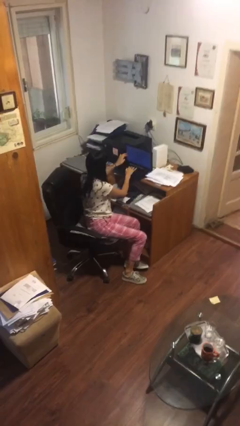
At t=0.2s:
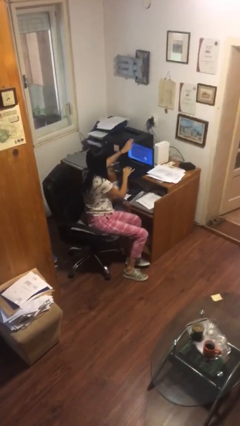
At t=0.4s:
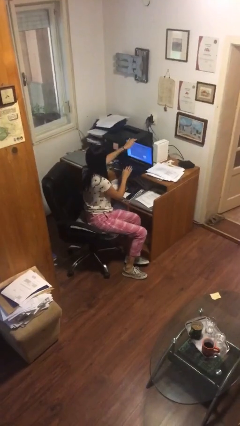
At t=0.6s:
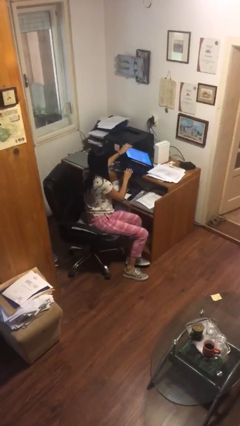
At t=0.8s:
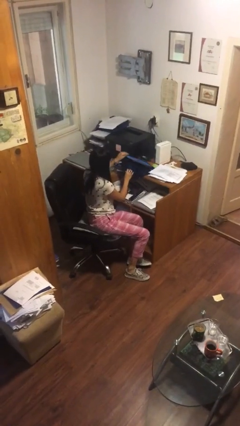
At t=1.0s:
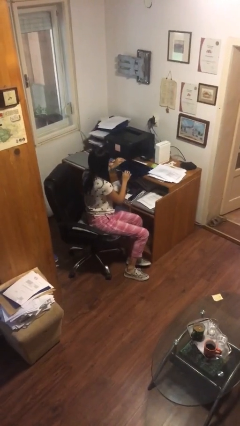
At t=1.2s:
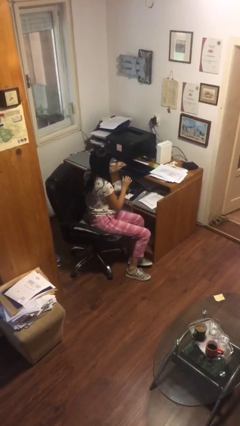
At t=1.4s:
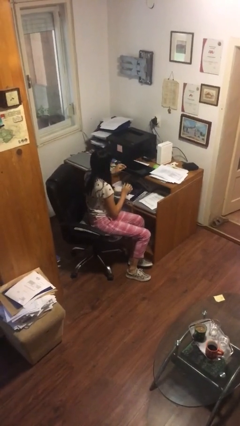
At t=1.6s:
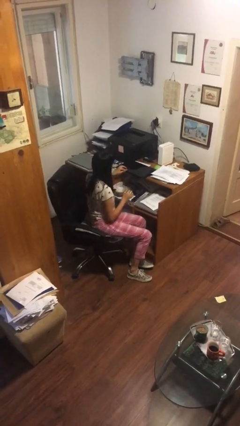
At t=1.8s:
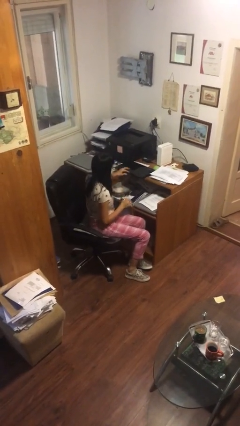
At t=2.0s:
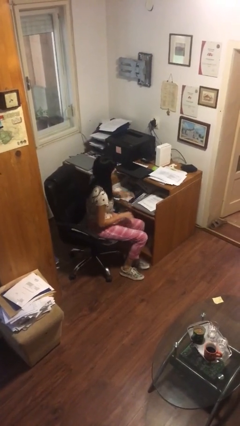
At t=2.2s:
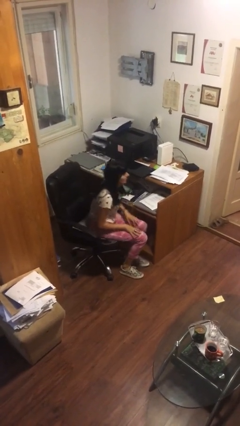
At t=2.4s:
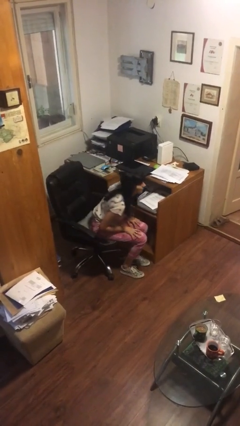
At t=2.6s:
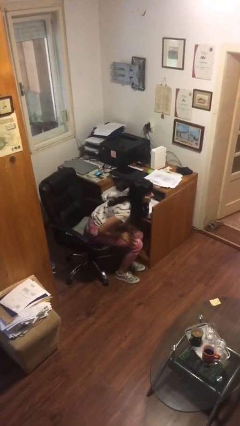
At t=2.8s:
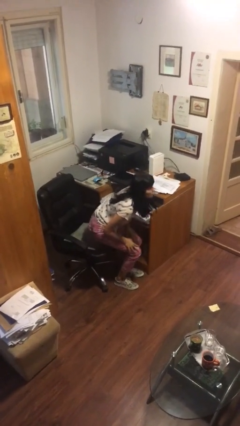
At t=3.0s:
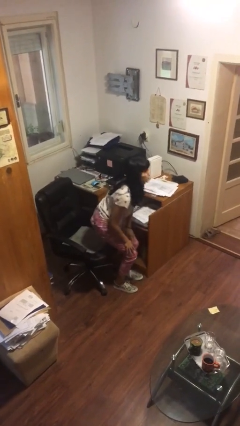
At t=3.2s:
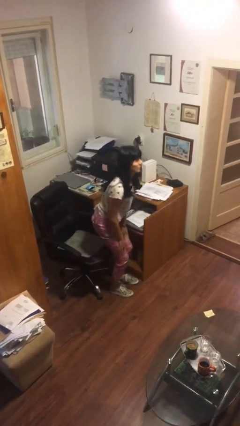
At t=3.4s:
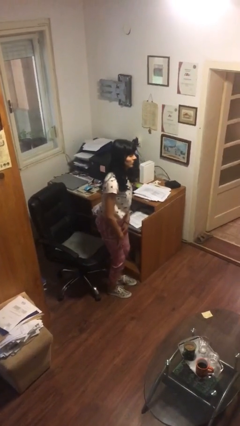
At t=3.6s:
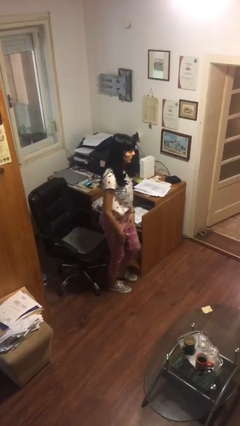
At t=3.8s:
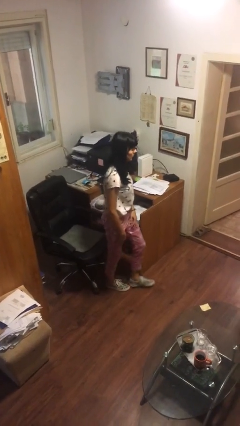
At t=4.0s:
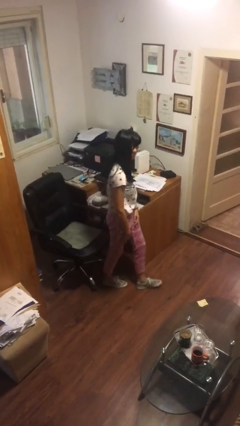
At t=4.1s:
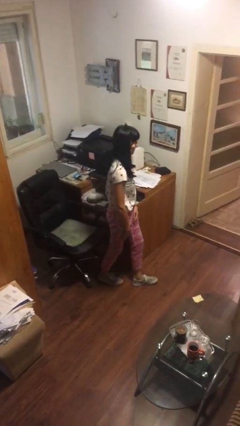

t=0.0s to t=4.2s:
person stands up

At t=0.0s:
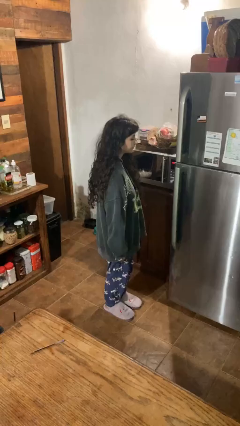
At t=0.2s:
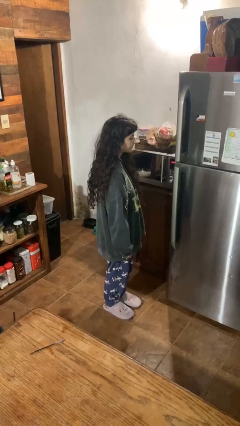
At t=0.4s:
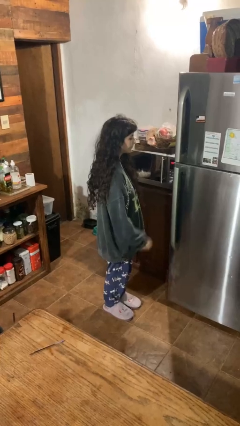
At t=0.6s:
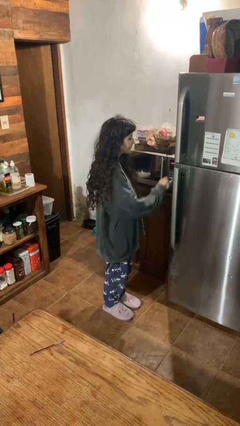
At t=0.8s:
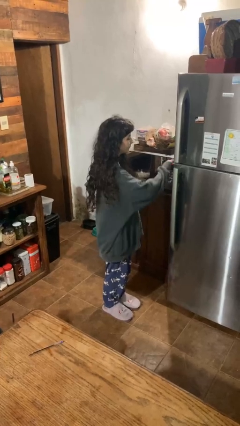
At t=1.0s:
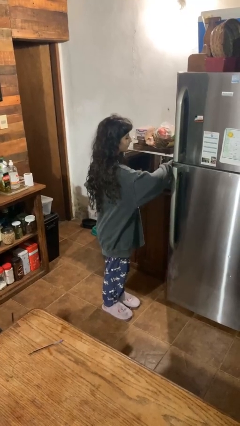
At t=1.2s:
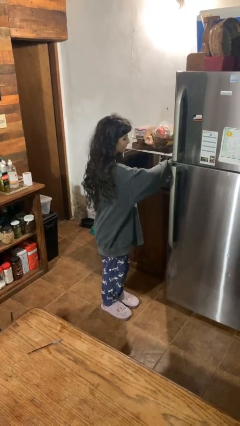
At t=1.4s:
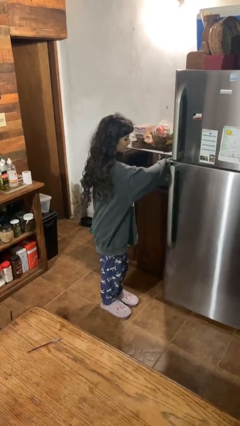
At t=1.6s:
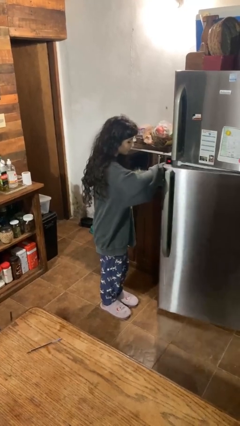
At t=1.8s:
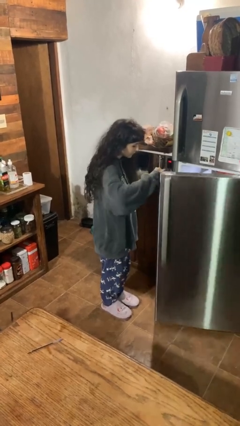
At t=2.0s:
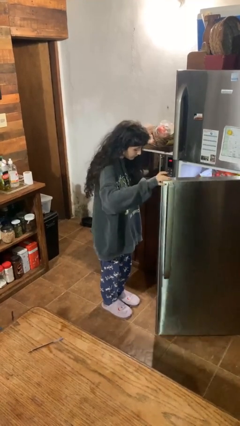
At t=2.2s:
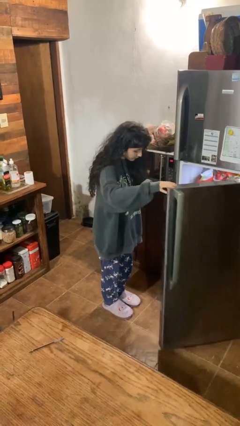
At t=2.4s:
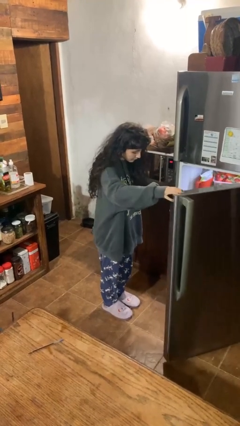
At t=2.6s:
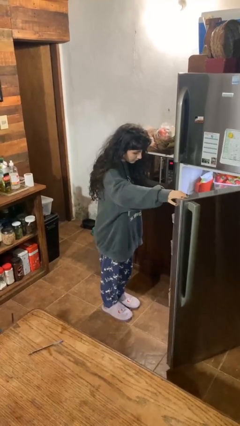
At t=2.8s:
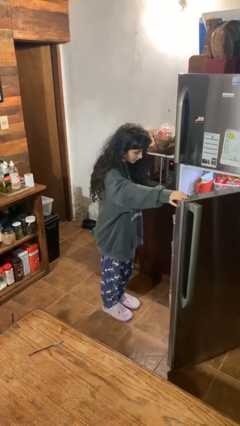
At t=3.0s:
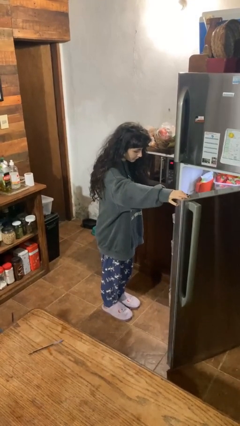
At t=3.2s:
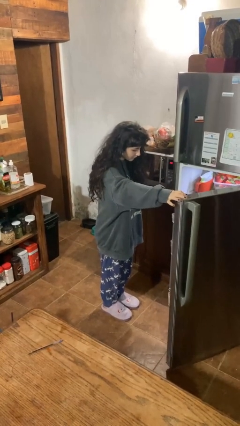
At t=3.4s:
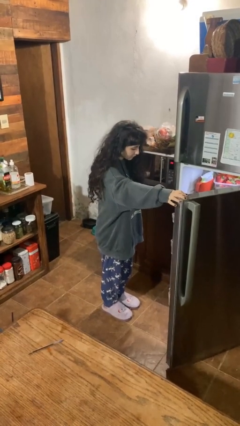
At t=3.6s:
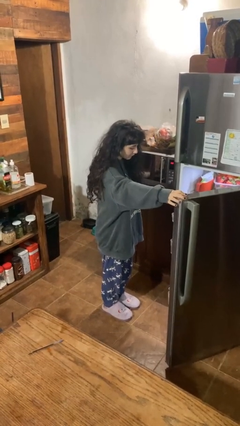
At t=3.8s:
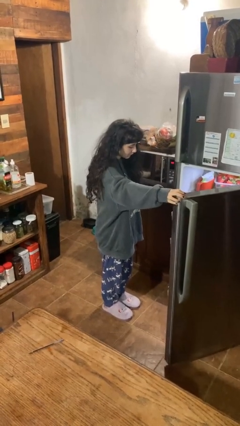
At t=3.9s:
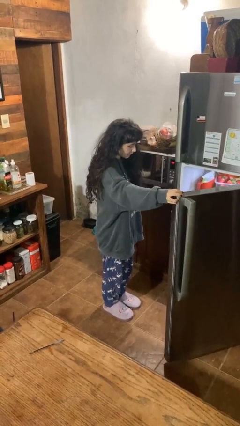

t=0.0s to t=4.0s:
person opens refrigerator

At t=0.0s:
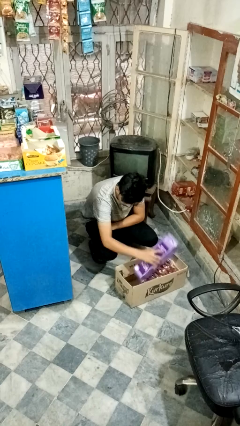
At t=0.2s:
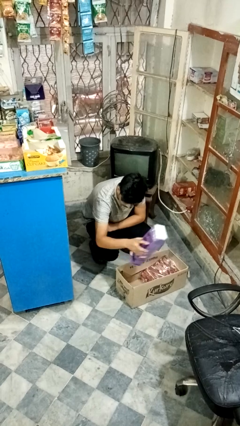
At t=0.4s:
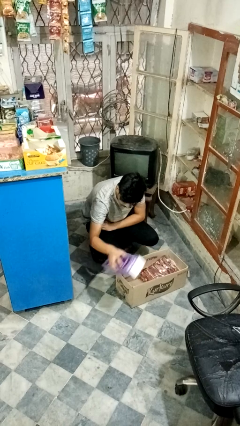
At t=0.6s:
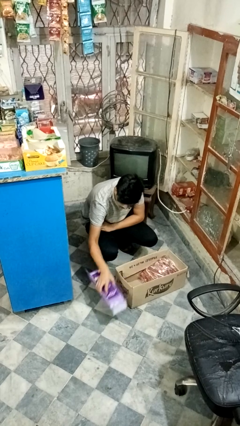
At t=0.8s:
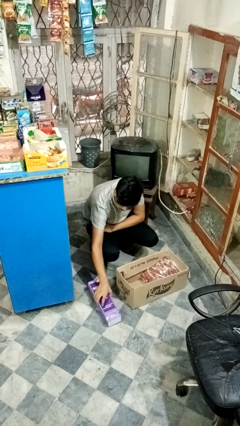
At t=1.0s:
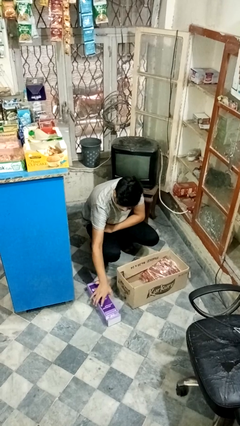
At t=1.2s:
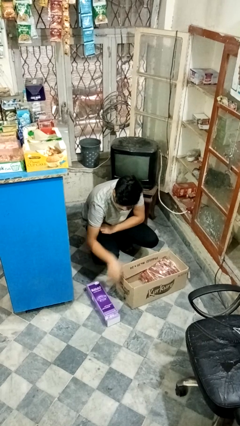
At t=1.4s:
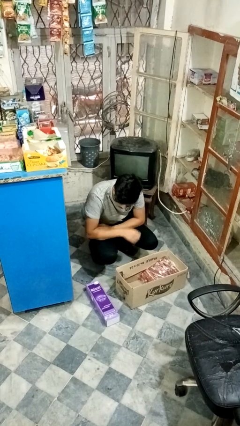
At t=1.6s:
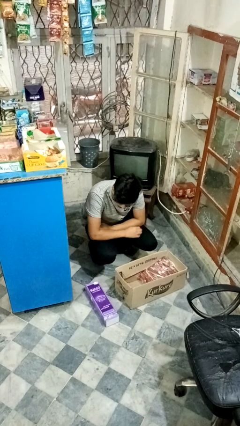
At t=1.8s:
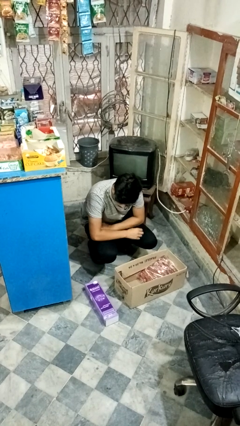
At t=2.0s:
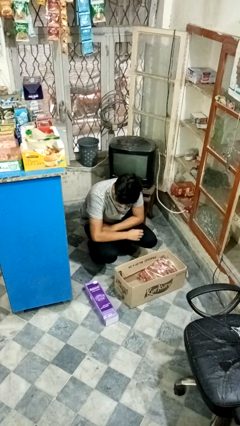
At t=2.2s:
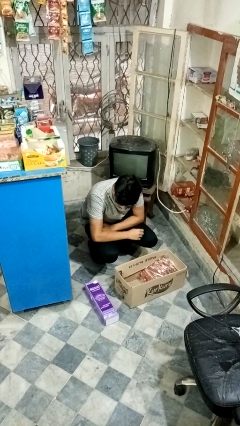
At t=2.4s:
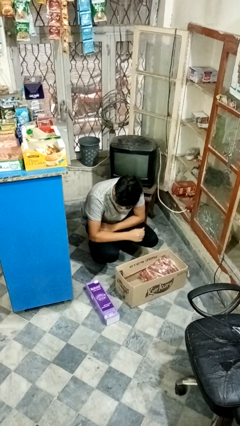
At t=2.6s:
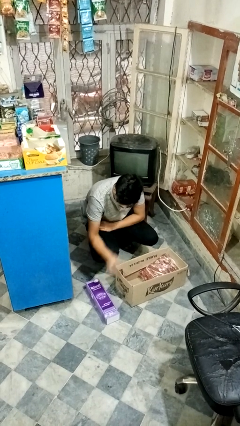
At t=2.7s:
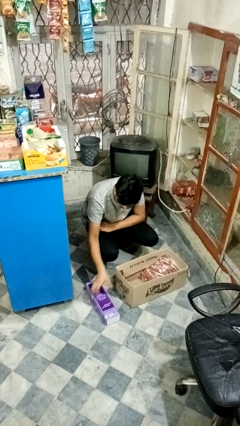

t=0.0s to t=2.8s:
person takes object from box

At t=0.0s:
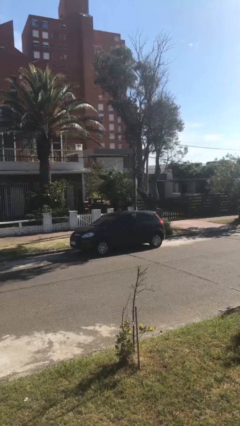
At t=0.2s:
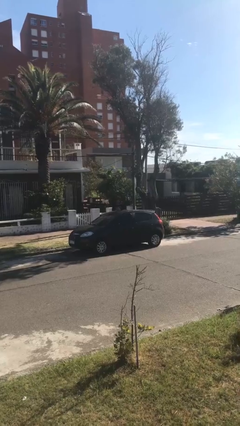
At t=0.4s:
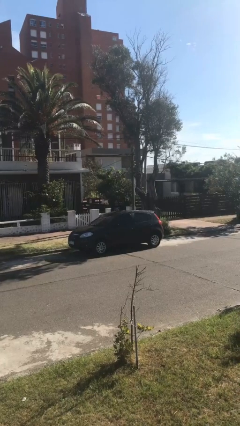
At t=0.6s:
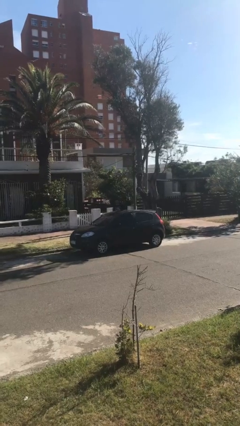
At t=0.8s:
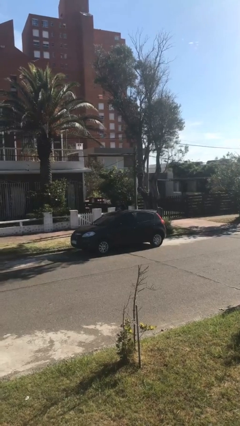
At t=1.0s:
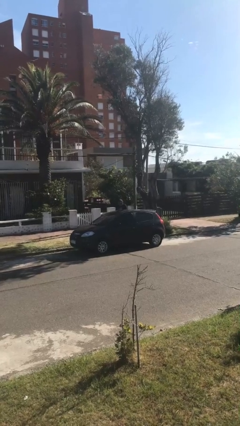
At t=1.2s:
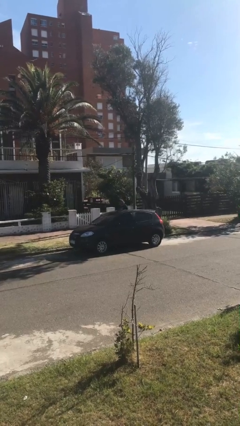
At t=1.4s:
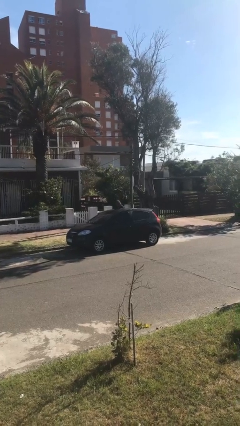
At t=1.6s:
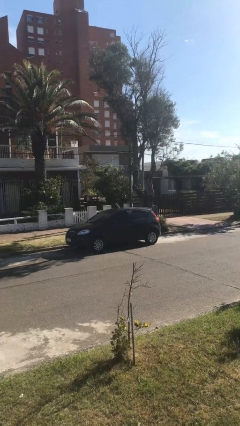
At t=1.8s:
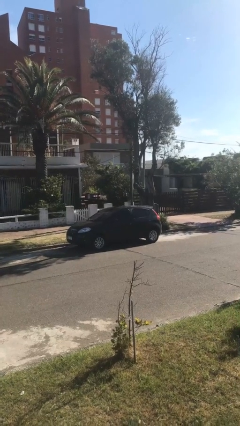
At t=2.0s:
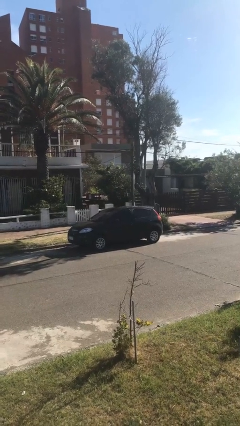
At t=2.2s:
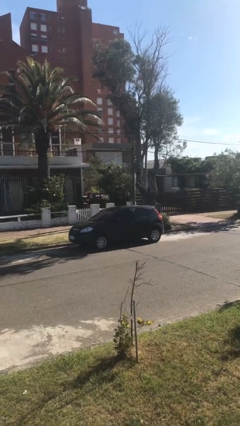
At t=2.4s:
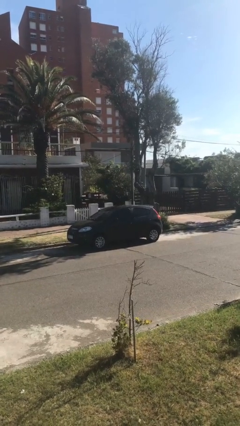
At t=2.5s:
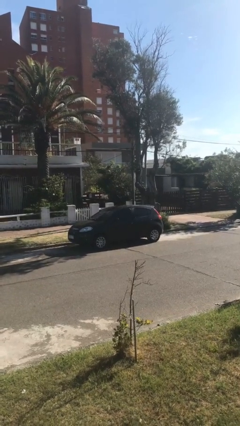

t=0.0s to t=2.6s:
person enters car

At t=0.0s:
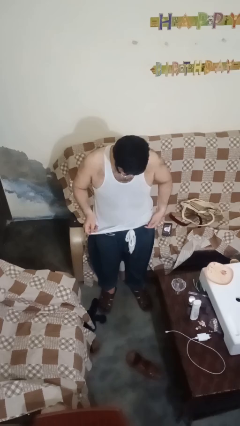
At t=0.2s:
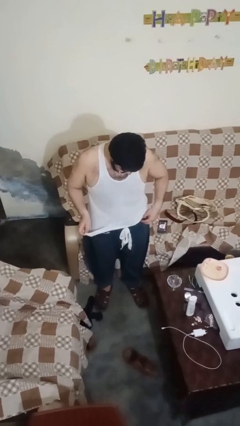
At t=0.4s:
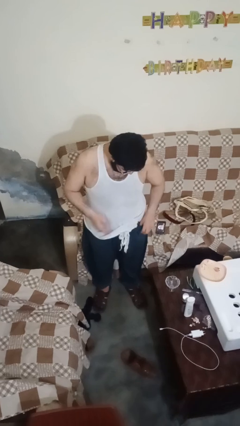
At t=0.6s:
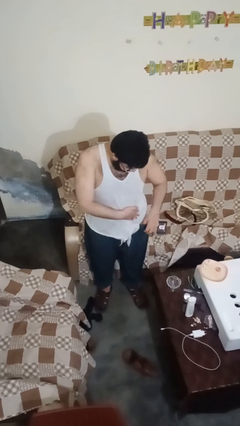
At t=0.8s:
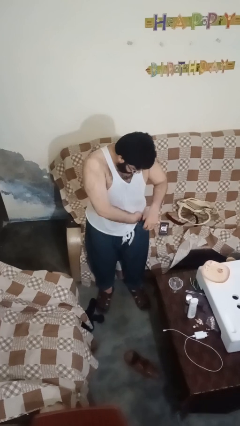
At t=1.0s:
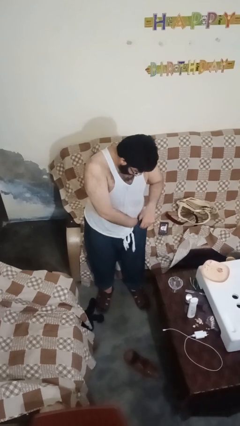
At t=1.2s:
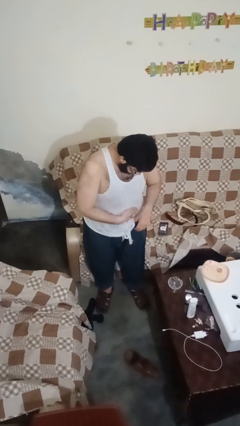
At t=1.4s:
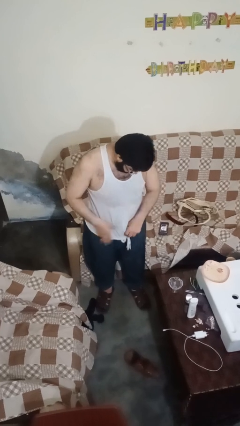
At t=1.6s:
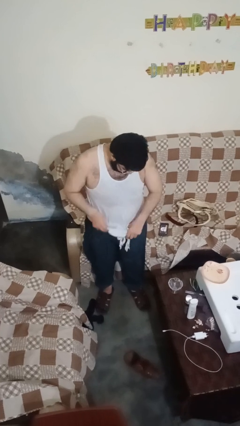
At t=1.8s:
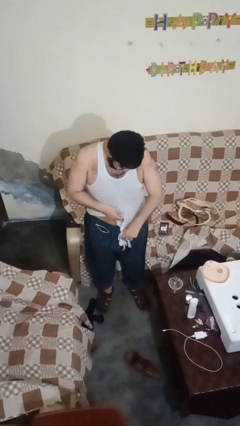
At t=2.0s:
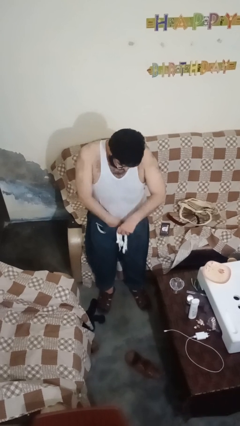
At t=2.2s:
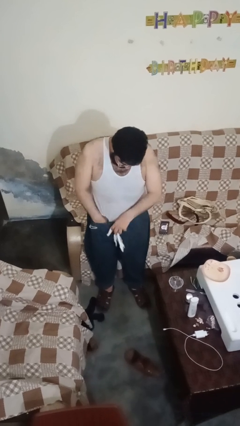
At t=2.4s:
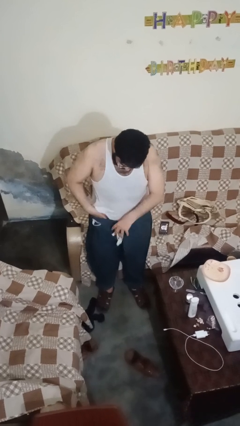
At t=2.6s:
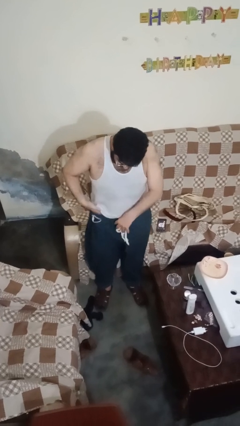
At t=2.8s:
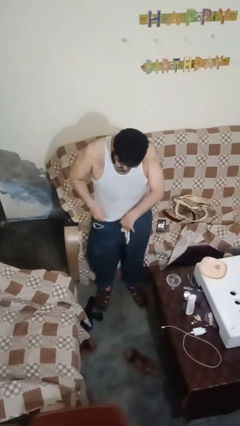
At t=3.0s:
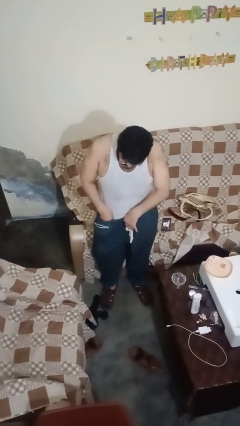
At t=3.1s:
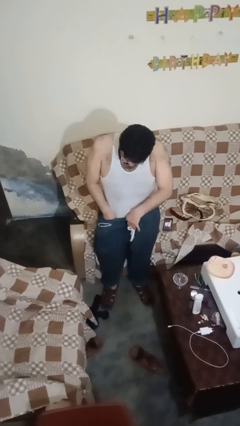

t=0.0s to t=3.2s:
person tucks in shirt

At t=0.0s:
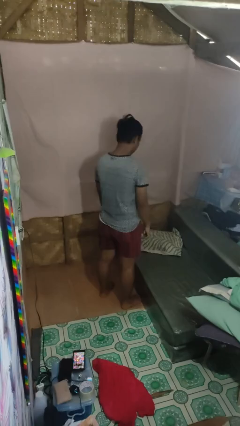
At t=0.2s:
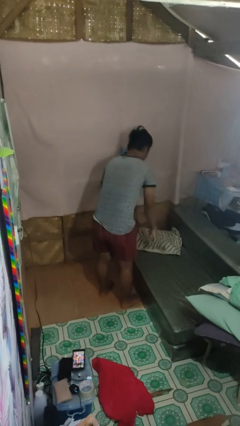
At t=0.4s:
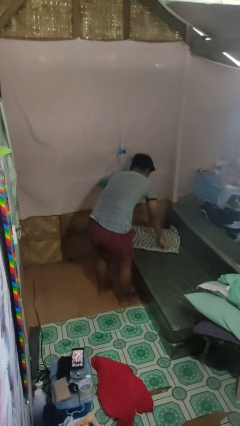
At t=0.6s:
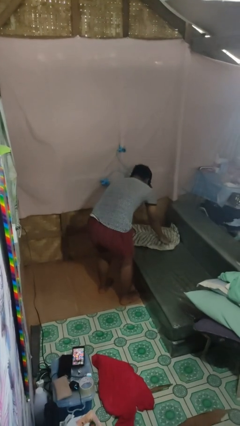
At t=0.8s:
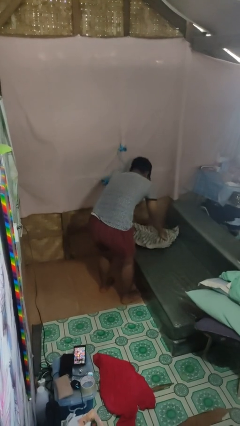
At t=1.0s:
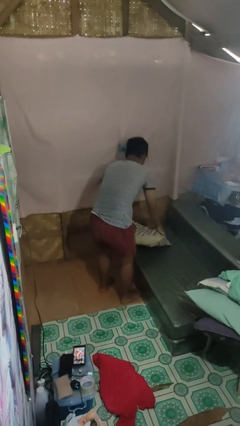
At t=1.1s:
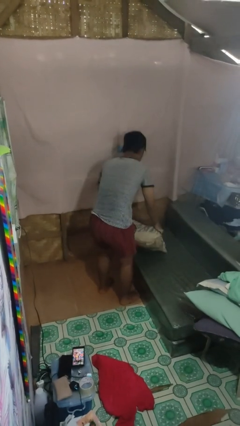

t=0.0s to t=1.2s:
person picks up object from couch
